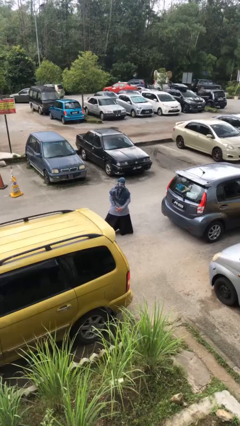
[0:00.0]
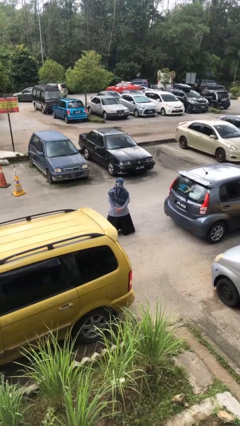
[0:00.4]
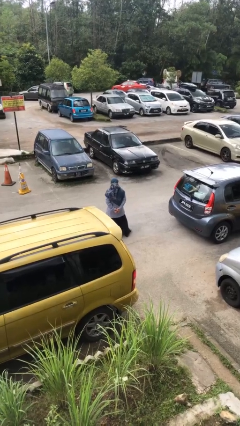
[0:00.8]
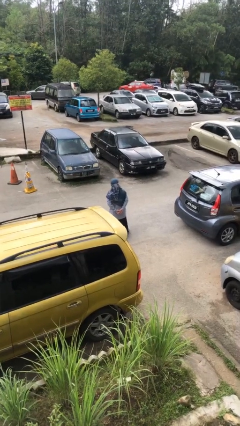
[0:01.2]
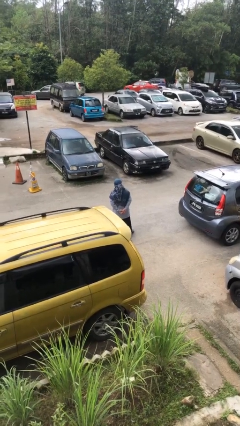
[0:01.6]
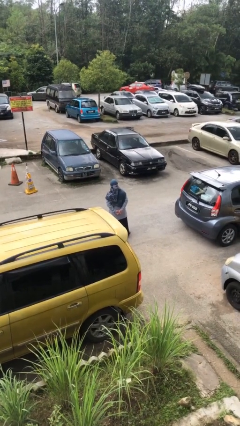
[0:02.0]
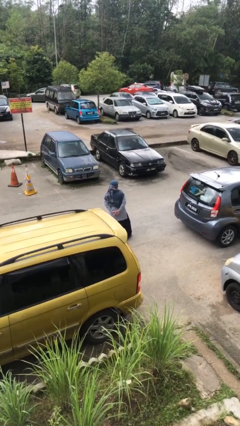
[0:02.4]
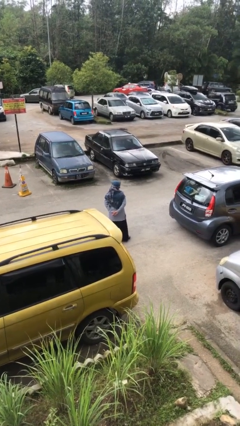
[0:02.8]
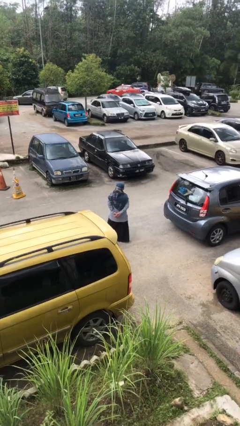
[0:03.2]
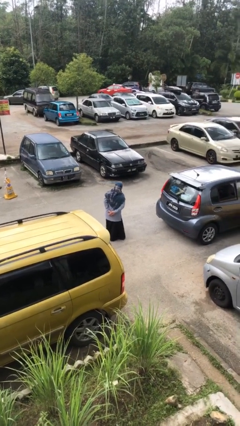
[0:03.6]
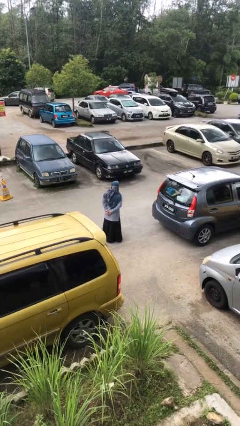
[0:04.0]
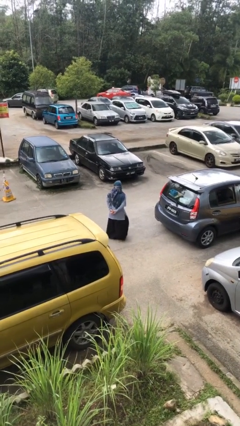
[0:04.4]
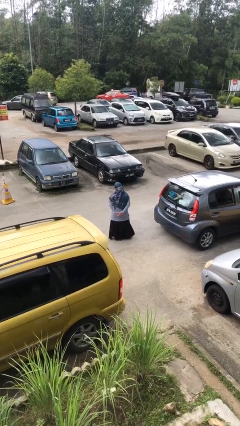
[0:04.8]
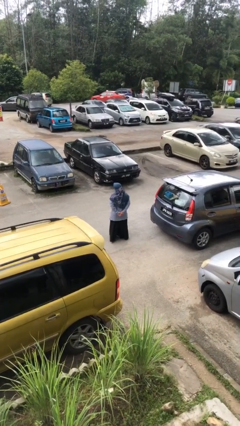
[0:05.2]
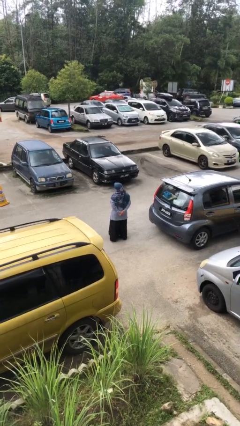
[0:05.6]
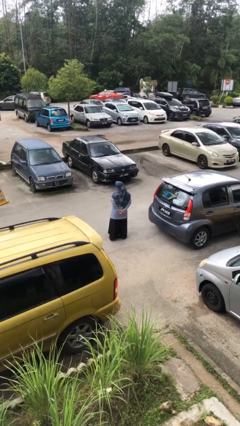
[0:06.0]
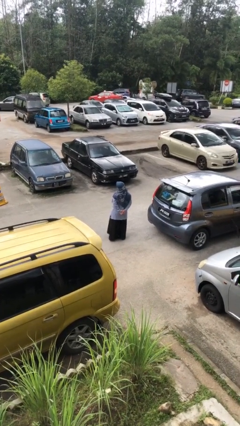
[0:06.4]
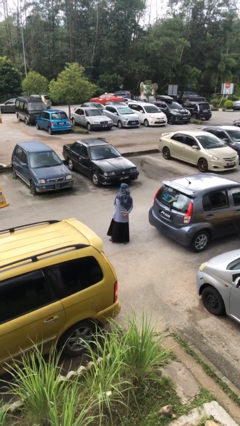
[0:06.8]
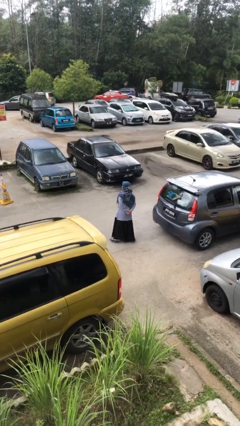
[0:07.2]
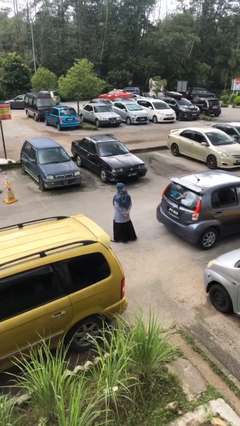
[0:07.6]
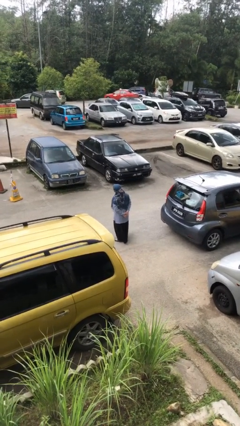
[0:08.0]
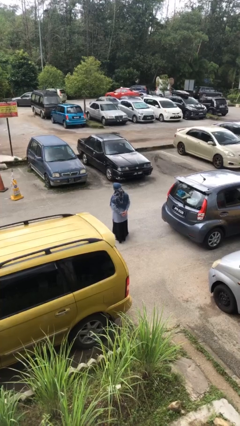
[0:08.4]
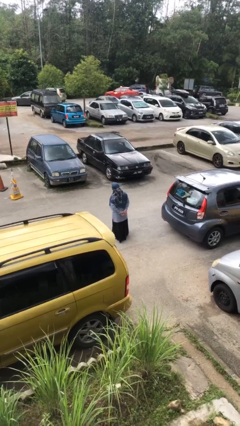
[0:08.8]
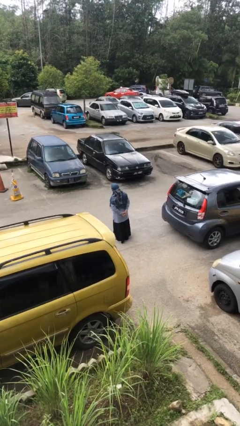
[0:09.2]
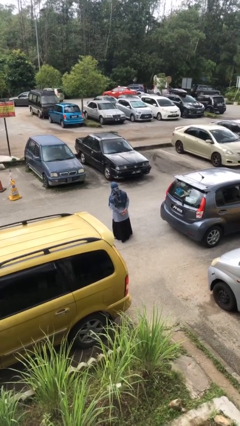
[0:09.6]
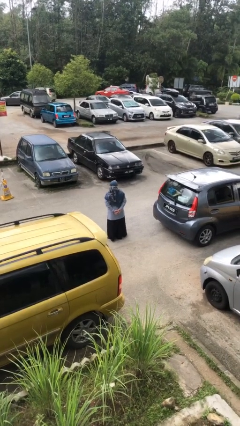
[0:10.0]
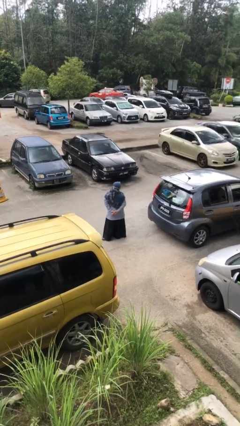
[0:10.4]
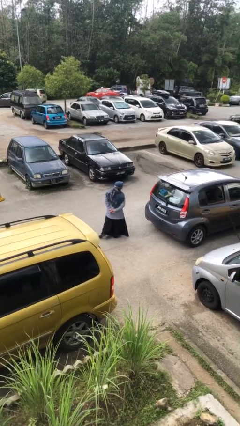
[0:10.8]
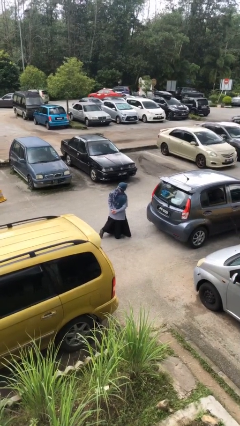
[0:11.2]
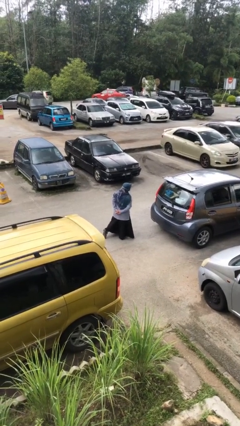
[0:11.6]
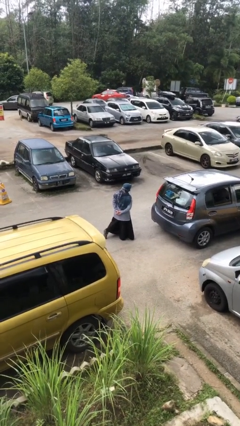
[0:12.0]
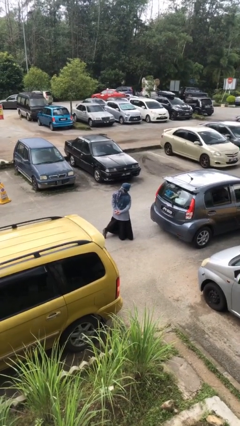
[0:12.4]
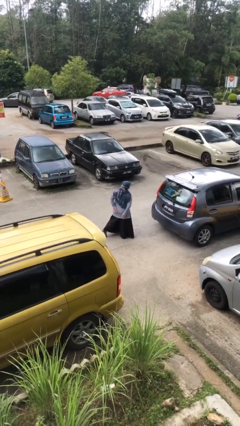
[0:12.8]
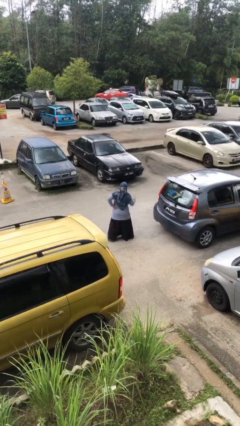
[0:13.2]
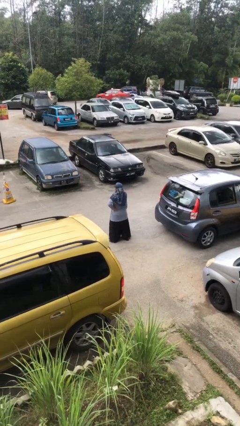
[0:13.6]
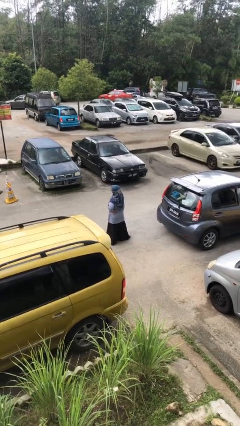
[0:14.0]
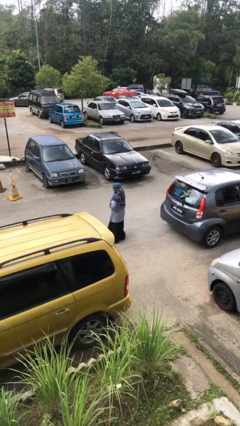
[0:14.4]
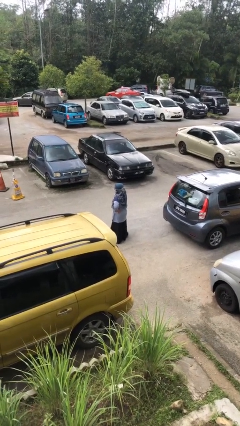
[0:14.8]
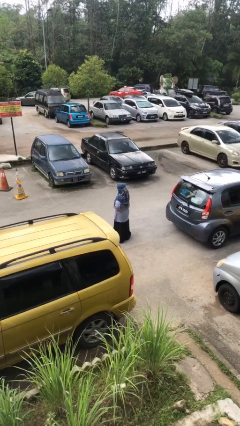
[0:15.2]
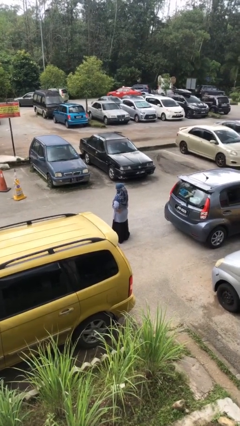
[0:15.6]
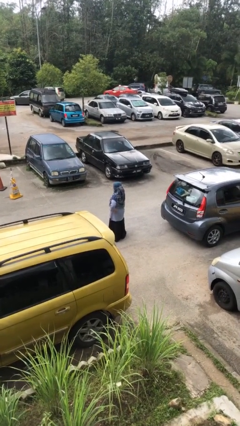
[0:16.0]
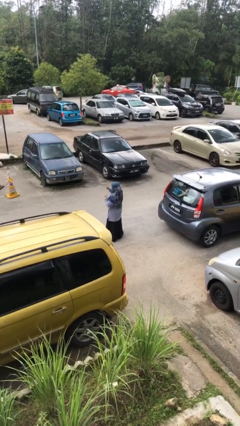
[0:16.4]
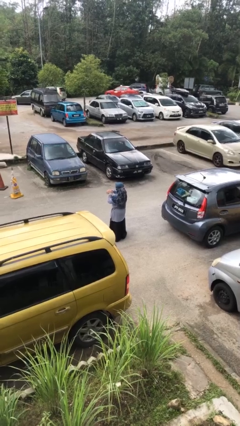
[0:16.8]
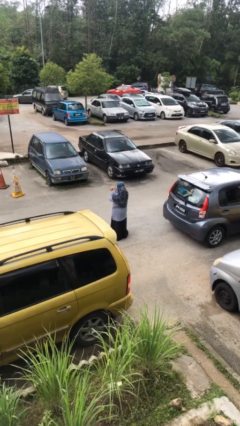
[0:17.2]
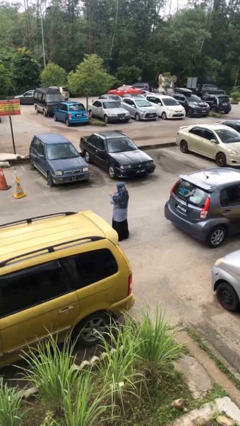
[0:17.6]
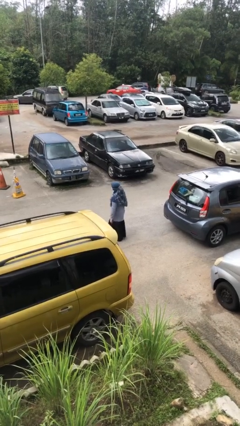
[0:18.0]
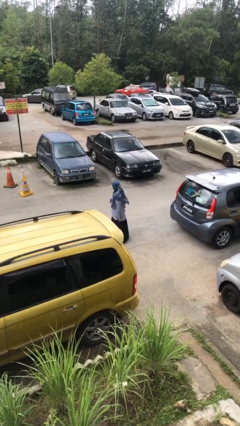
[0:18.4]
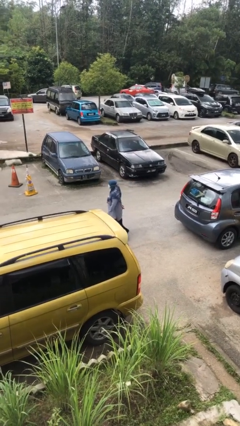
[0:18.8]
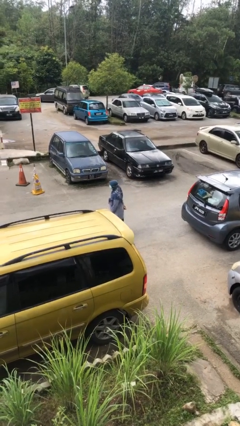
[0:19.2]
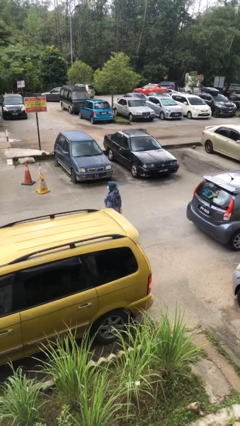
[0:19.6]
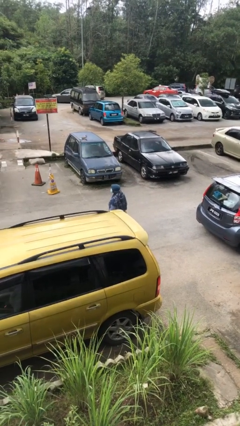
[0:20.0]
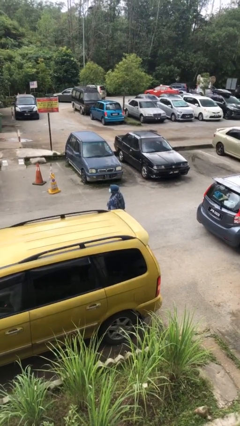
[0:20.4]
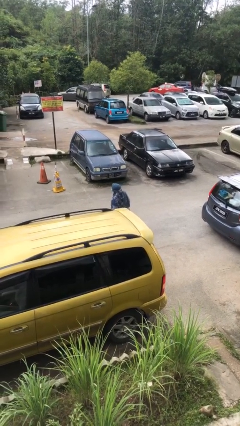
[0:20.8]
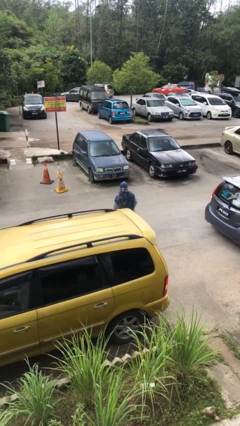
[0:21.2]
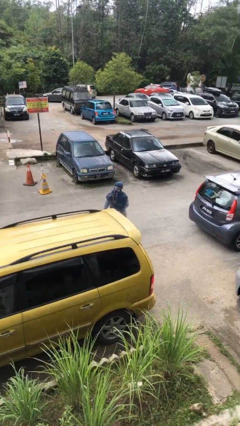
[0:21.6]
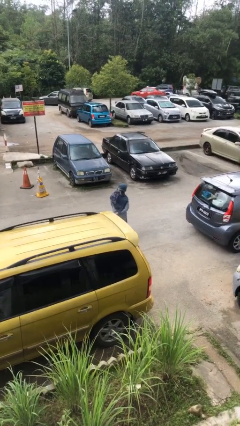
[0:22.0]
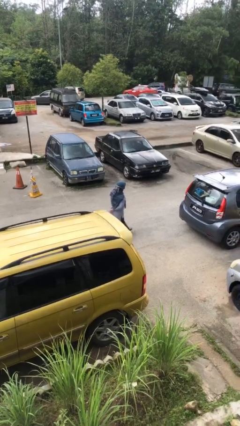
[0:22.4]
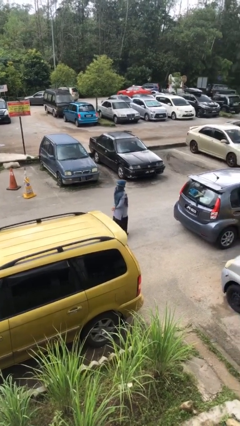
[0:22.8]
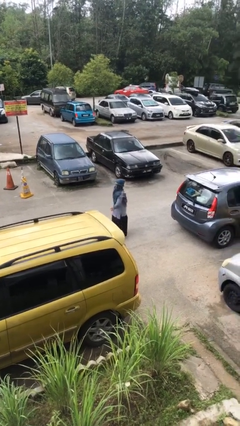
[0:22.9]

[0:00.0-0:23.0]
person walks

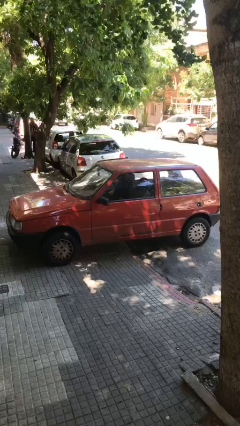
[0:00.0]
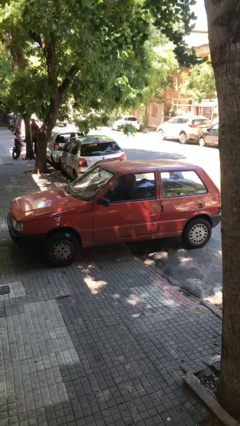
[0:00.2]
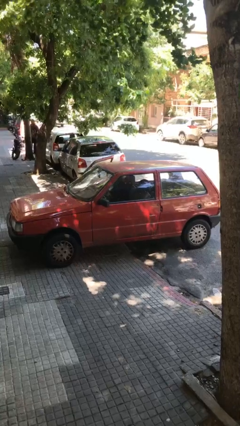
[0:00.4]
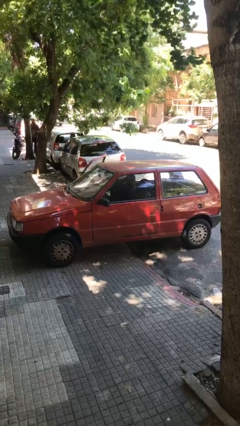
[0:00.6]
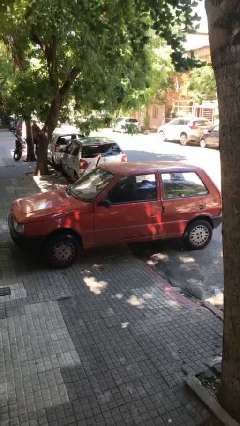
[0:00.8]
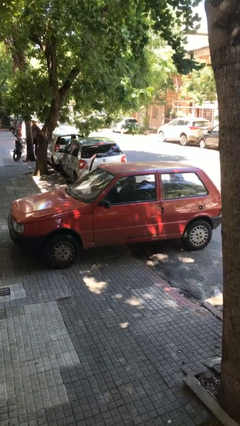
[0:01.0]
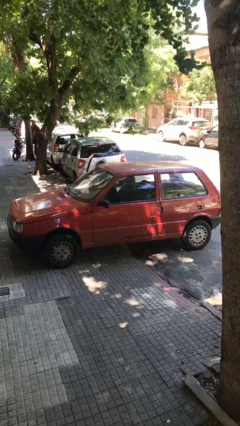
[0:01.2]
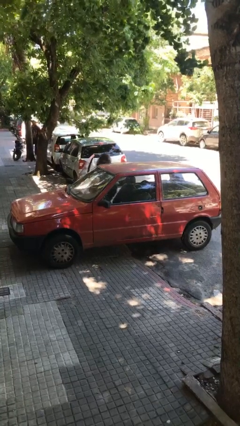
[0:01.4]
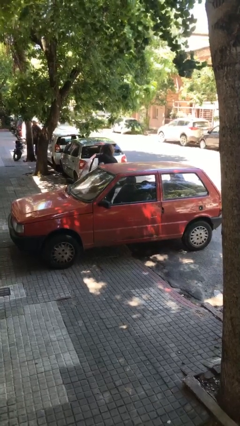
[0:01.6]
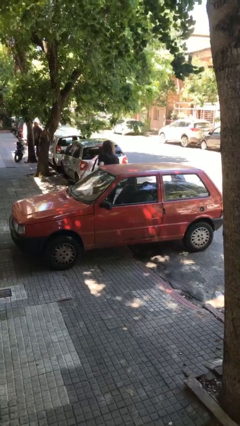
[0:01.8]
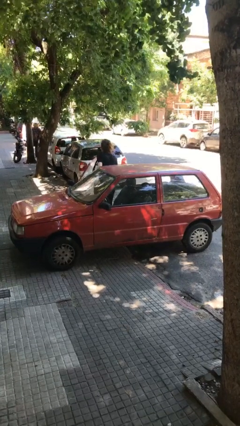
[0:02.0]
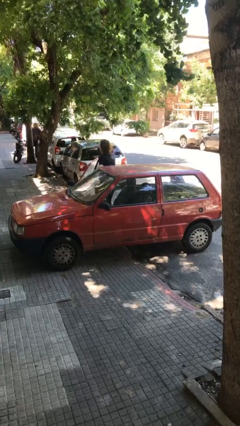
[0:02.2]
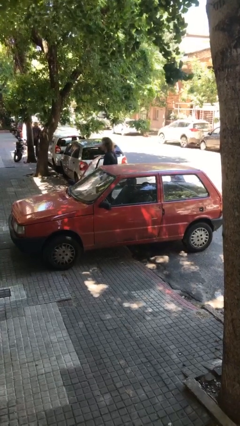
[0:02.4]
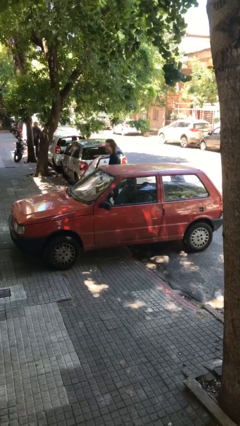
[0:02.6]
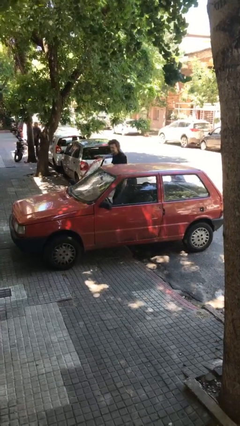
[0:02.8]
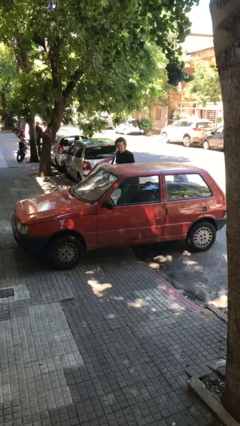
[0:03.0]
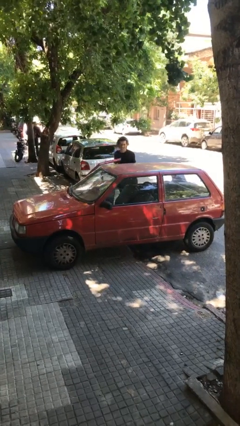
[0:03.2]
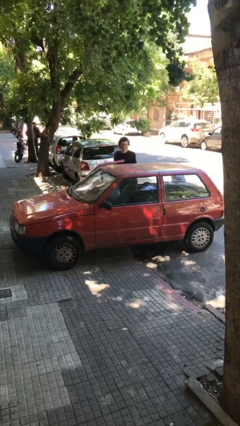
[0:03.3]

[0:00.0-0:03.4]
car drops off person

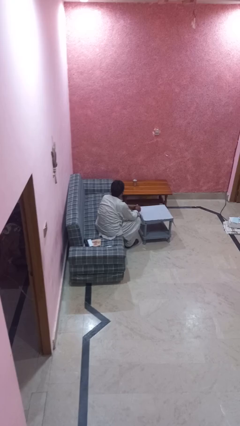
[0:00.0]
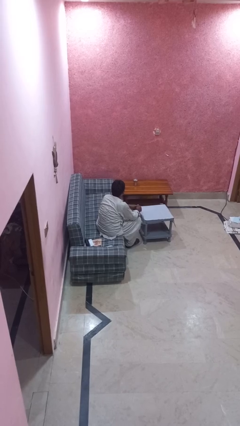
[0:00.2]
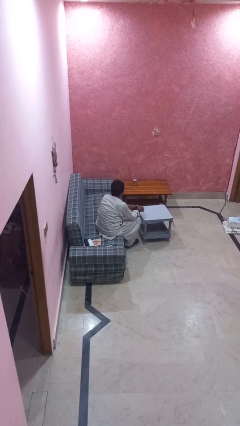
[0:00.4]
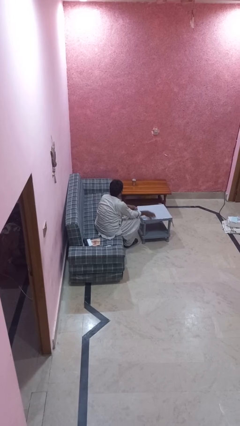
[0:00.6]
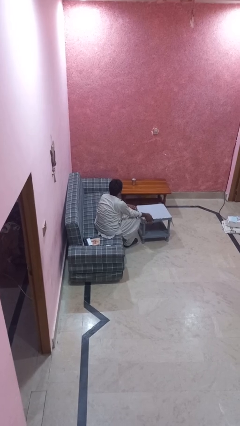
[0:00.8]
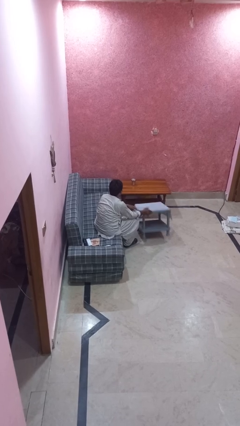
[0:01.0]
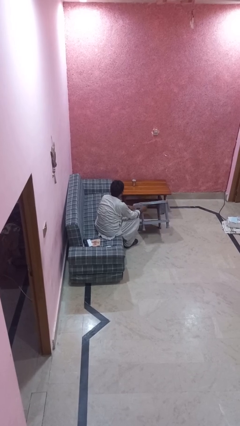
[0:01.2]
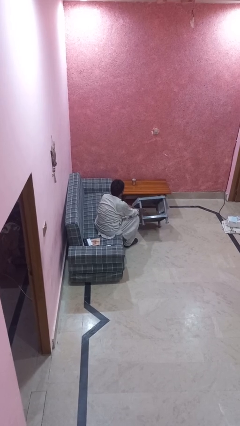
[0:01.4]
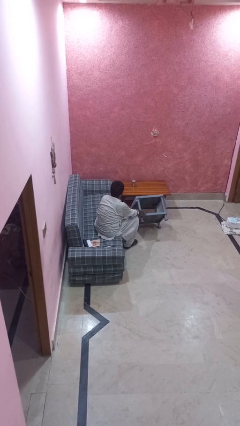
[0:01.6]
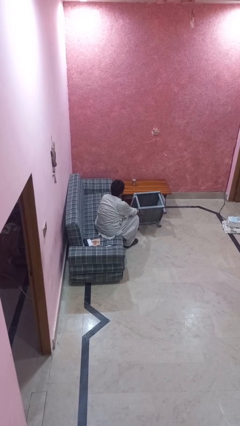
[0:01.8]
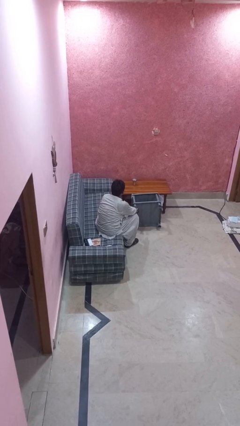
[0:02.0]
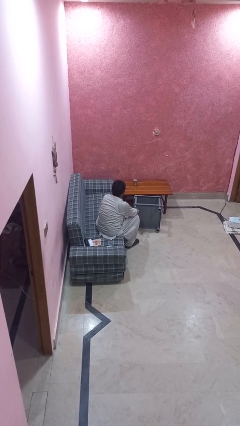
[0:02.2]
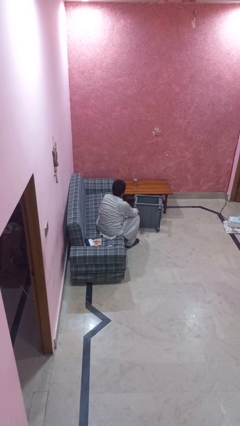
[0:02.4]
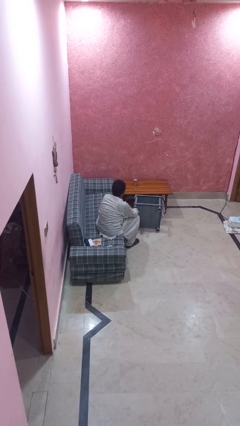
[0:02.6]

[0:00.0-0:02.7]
person knocks over furniture

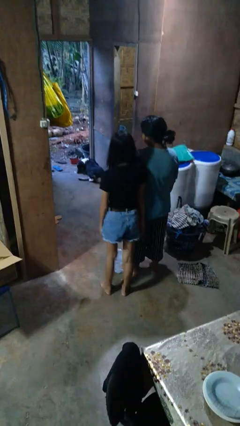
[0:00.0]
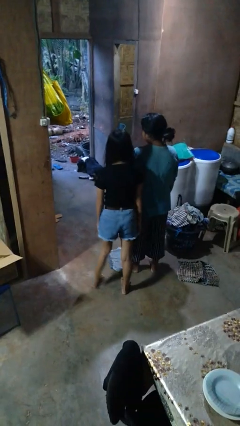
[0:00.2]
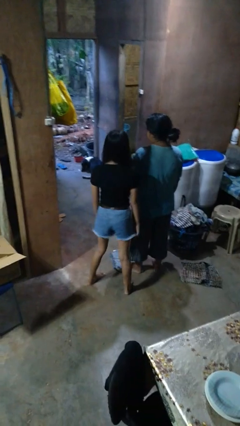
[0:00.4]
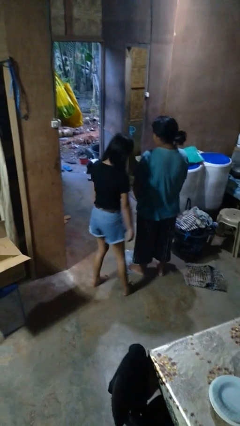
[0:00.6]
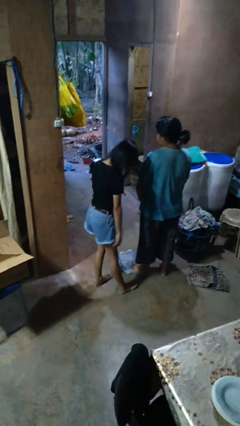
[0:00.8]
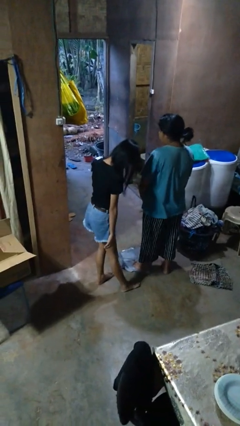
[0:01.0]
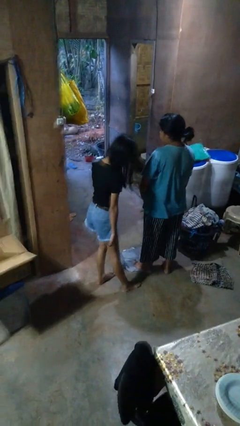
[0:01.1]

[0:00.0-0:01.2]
person bumps into person
